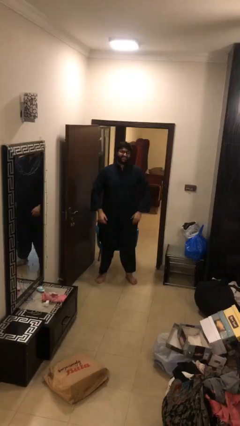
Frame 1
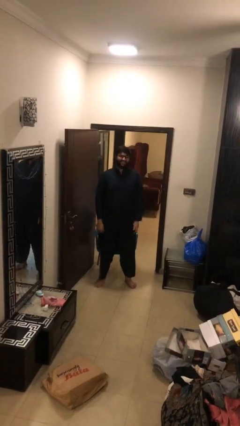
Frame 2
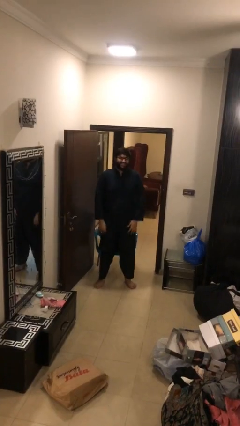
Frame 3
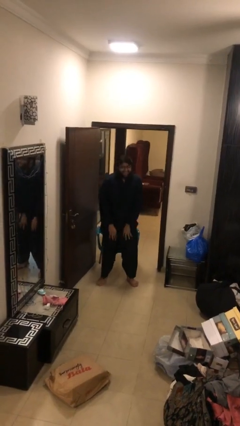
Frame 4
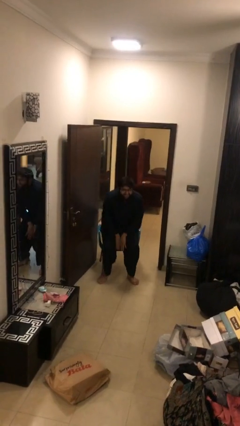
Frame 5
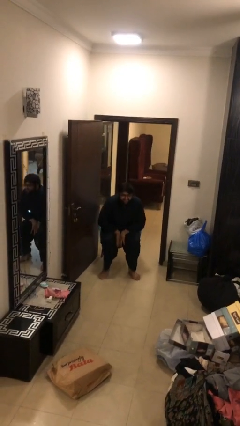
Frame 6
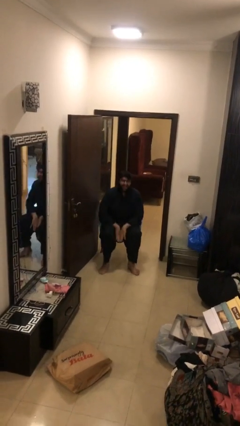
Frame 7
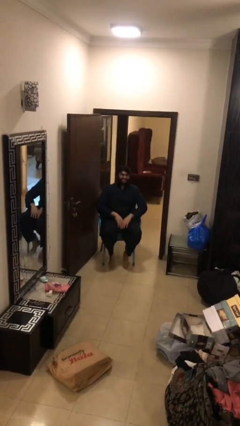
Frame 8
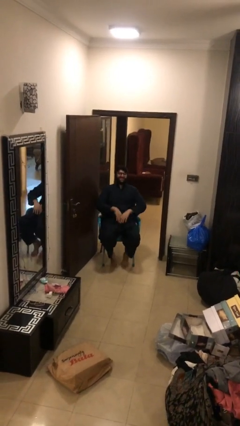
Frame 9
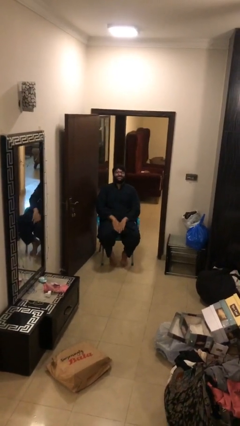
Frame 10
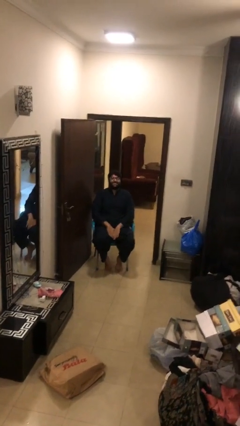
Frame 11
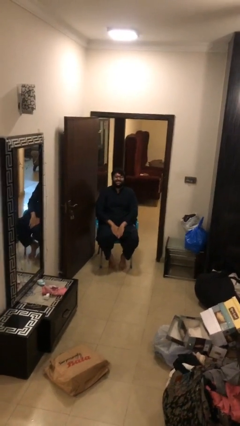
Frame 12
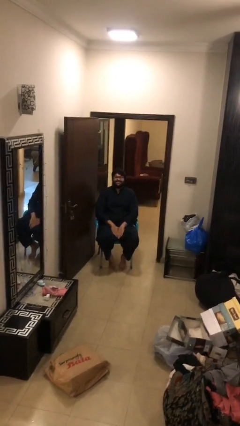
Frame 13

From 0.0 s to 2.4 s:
person sits down

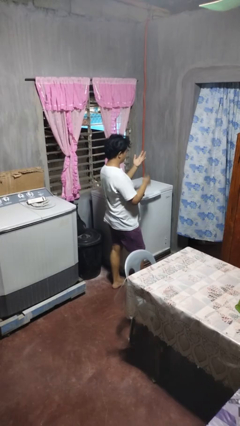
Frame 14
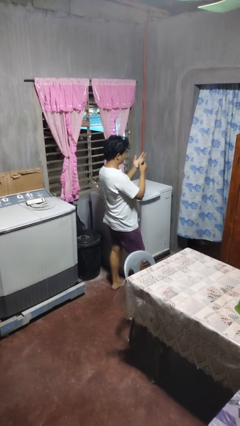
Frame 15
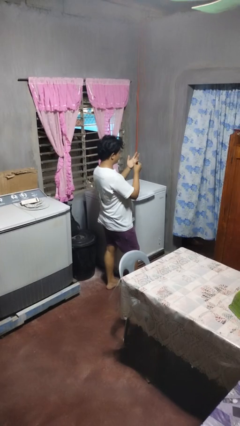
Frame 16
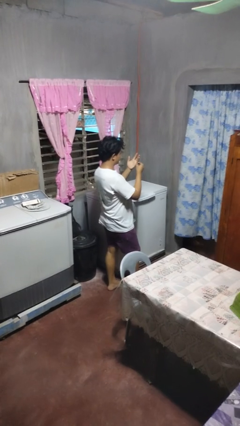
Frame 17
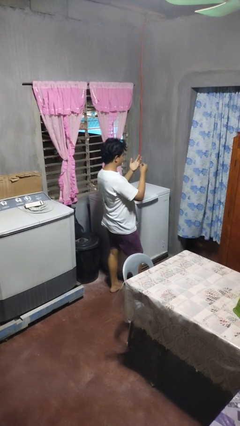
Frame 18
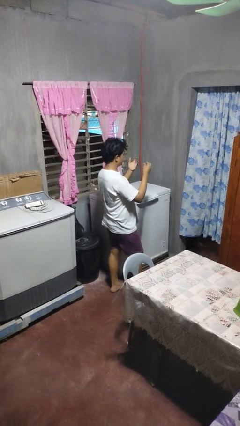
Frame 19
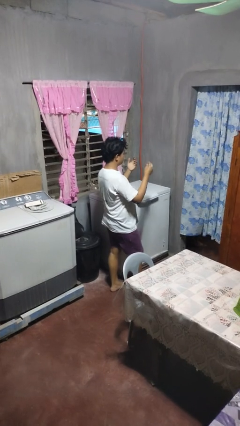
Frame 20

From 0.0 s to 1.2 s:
person takes off ring

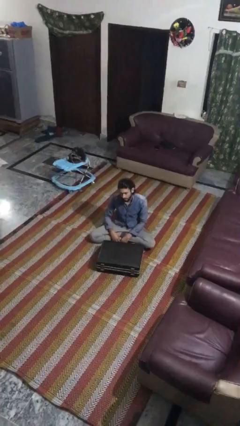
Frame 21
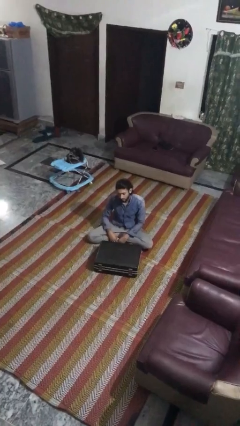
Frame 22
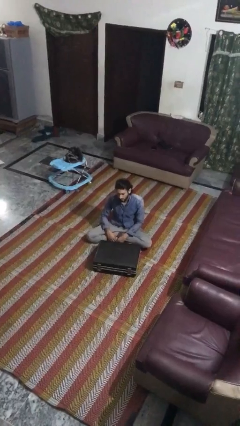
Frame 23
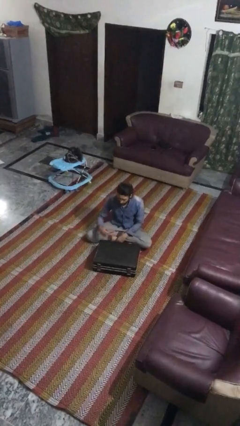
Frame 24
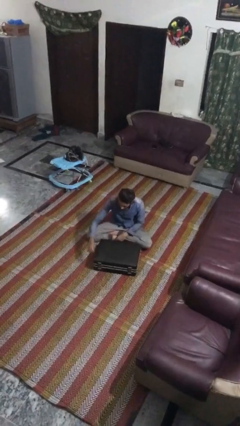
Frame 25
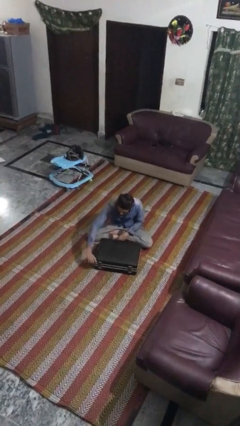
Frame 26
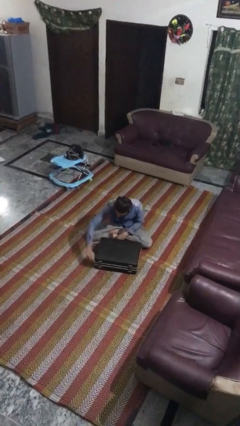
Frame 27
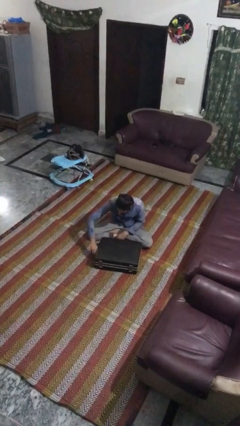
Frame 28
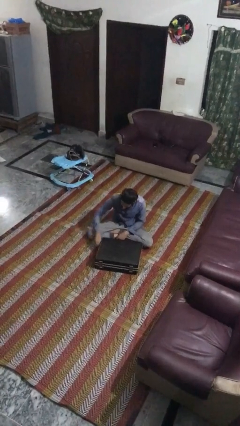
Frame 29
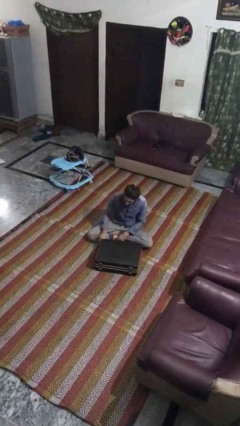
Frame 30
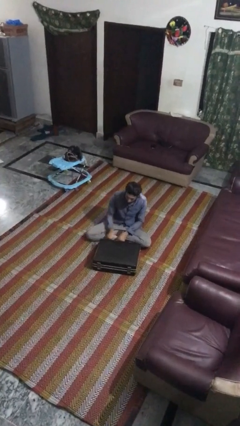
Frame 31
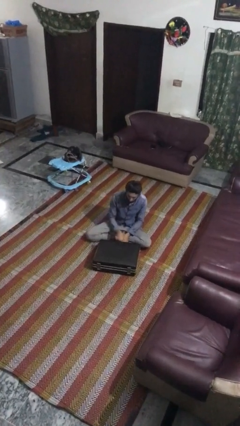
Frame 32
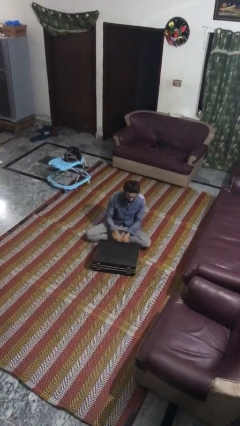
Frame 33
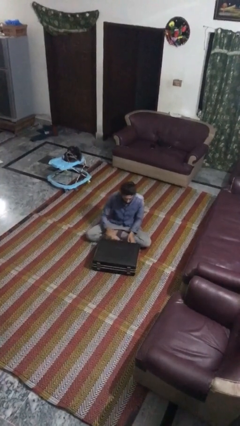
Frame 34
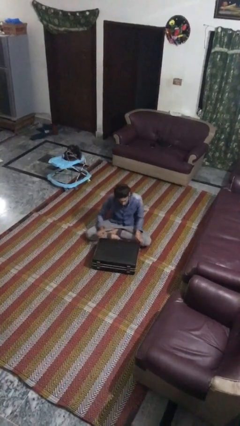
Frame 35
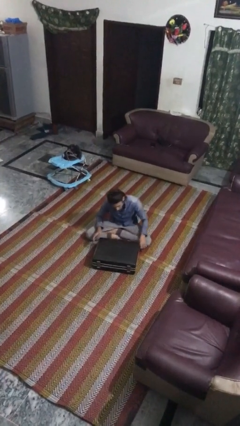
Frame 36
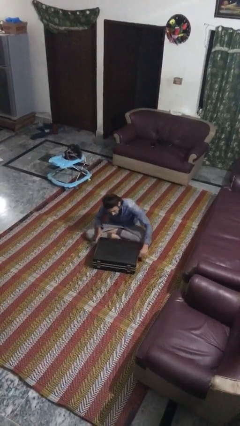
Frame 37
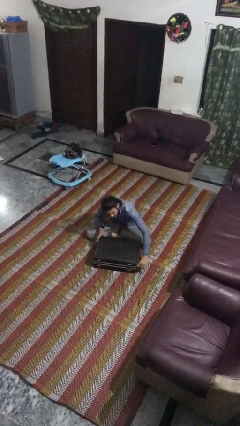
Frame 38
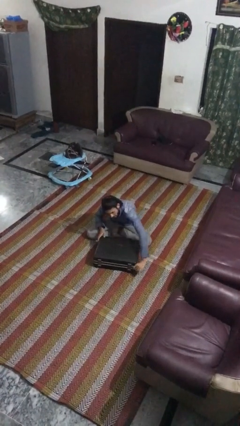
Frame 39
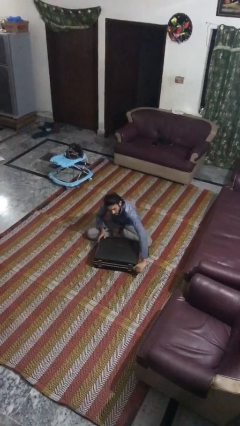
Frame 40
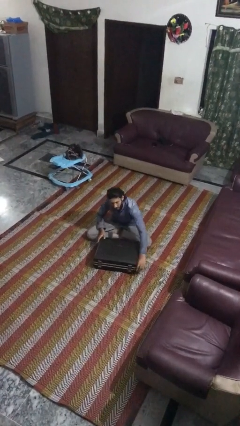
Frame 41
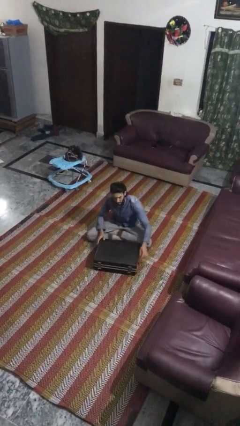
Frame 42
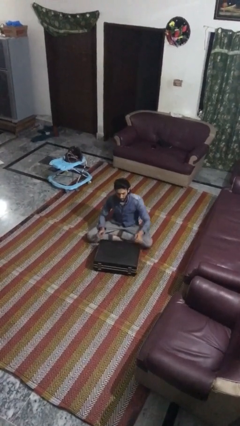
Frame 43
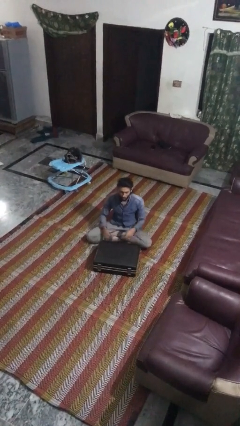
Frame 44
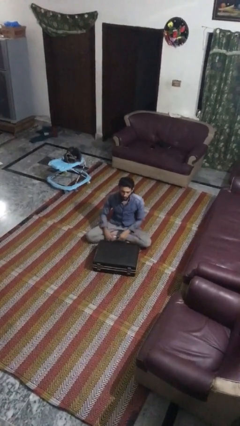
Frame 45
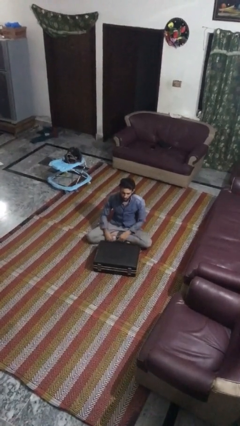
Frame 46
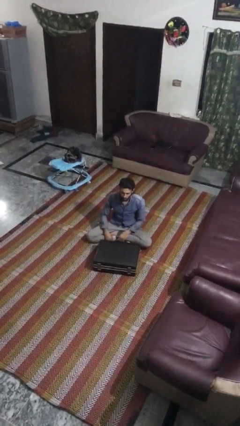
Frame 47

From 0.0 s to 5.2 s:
person opens suitcase

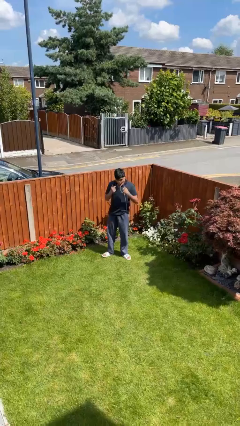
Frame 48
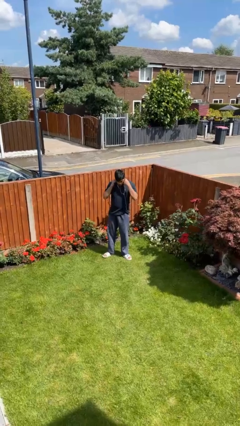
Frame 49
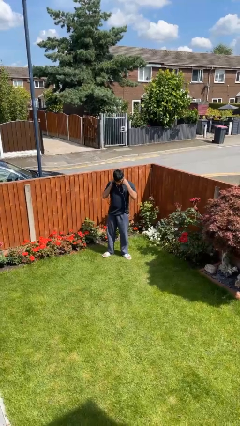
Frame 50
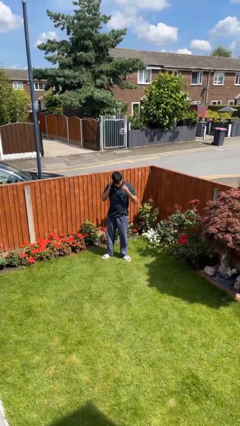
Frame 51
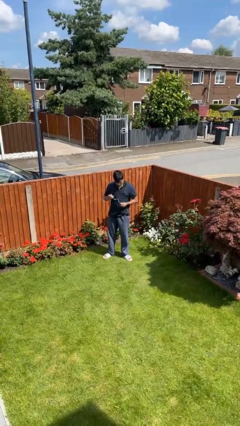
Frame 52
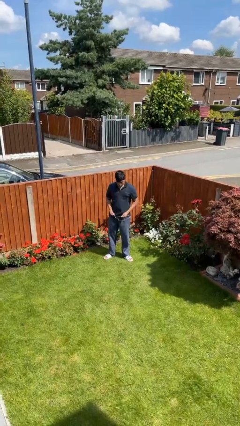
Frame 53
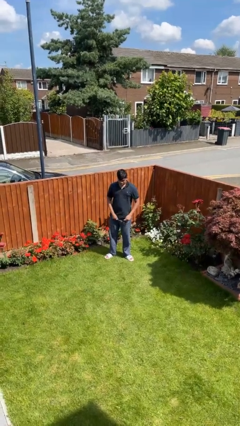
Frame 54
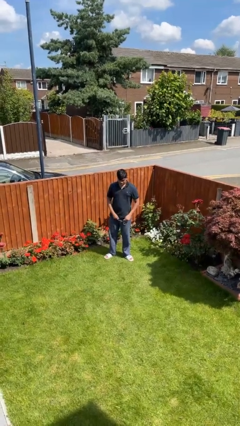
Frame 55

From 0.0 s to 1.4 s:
person takes off headphones

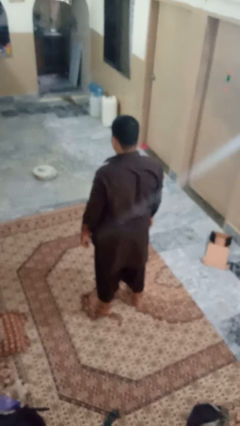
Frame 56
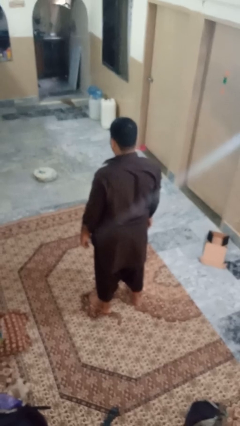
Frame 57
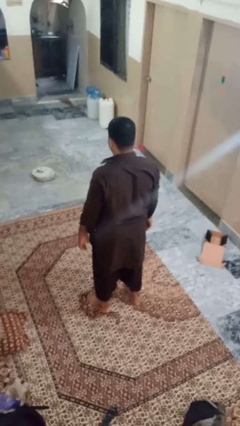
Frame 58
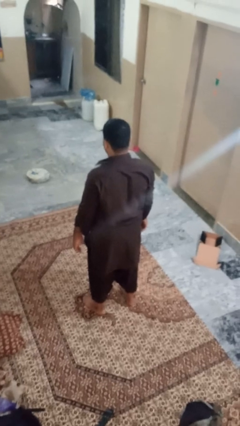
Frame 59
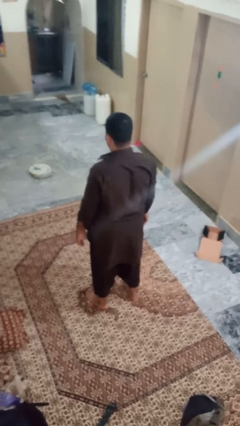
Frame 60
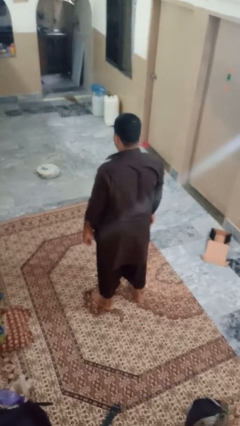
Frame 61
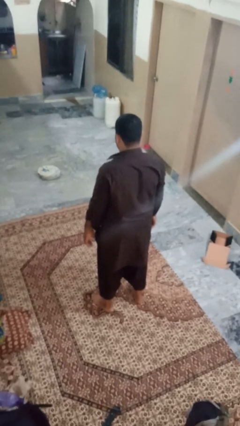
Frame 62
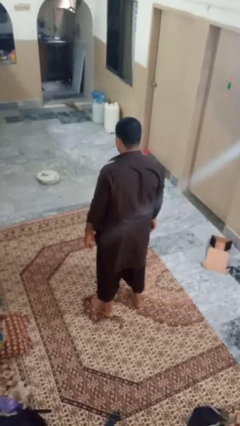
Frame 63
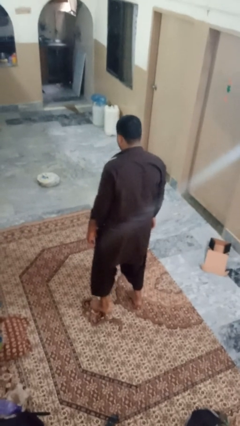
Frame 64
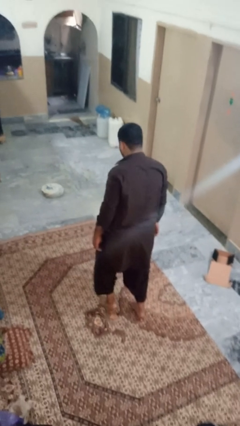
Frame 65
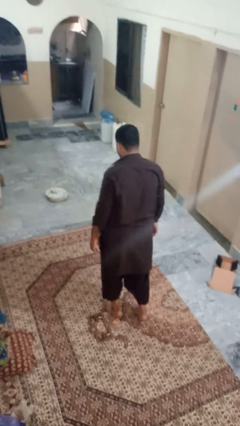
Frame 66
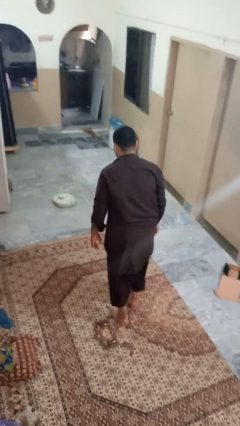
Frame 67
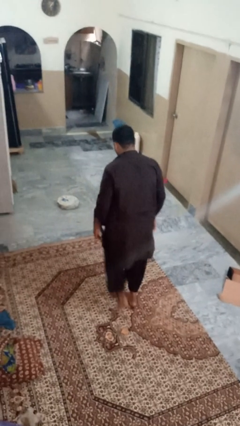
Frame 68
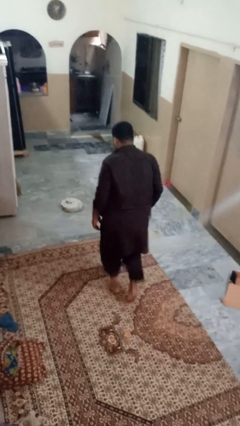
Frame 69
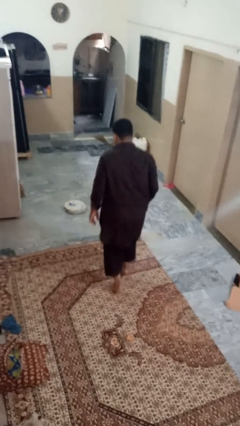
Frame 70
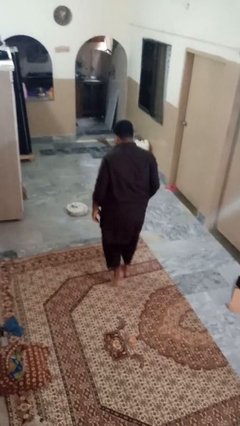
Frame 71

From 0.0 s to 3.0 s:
person walks tiptoe

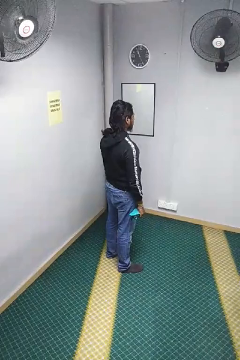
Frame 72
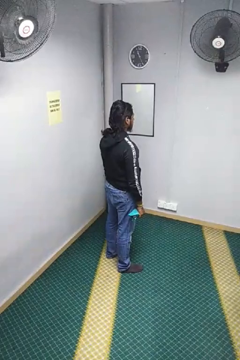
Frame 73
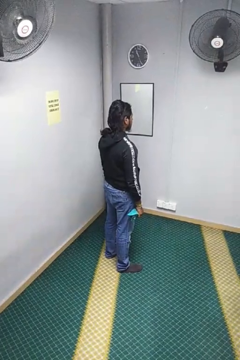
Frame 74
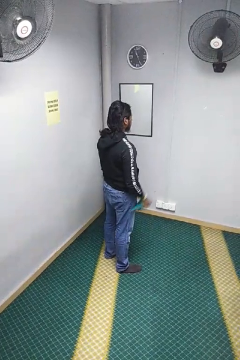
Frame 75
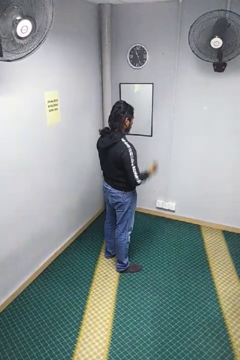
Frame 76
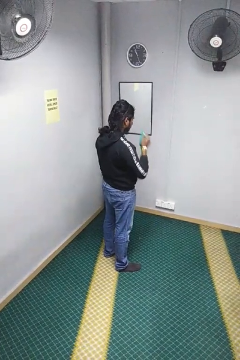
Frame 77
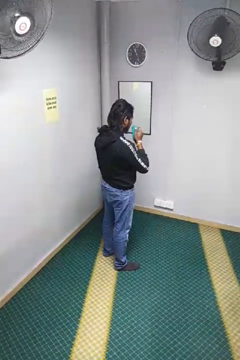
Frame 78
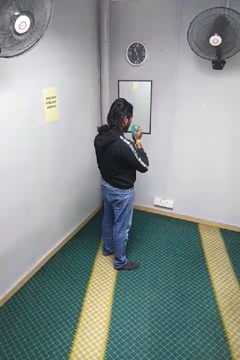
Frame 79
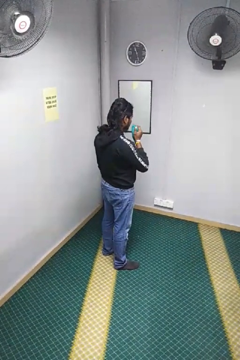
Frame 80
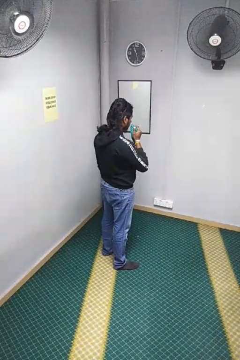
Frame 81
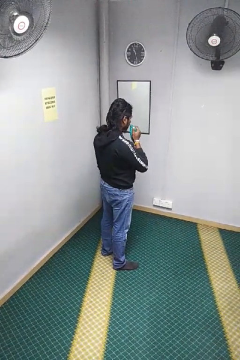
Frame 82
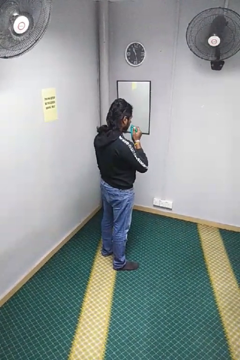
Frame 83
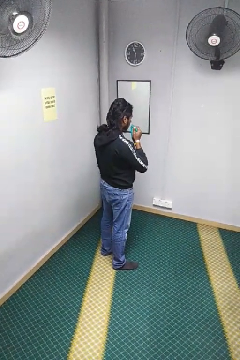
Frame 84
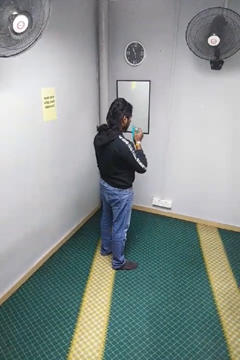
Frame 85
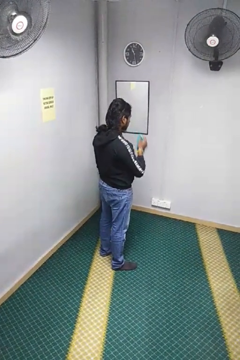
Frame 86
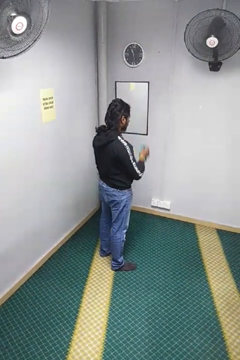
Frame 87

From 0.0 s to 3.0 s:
person wipes mouth with napkin

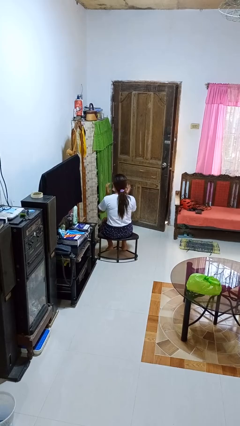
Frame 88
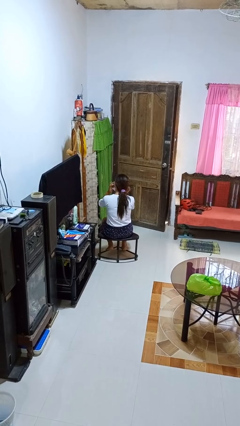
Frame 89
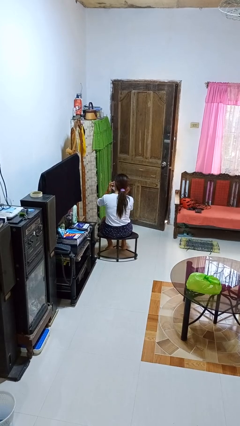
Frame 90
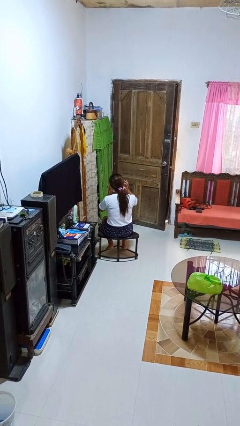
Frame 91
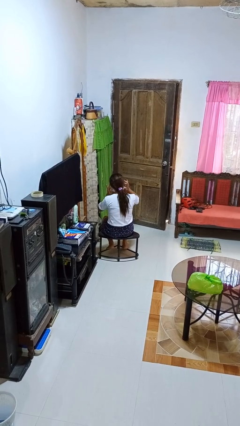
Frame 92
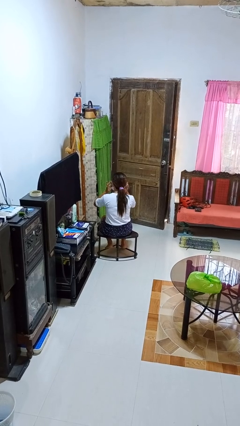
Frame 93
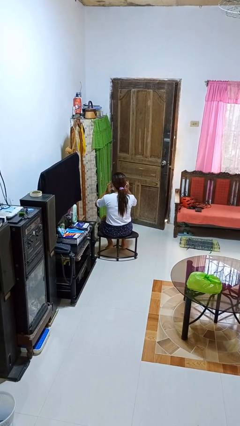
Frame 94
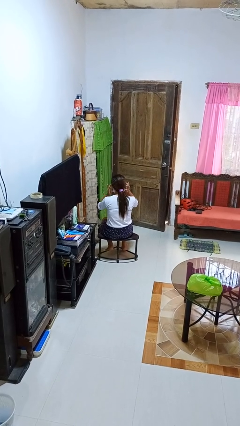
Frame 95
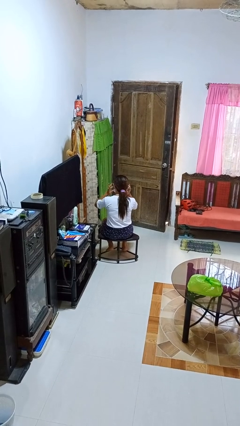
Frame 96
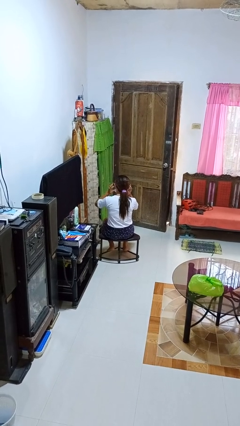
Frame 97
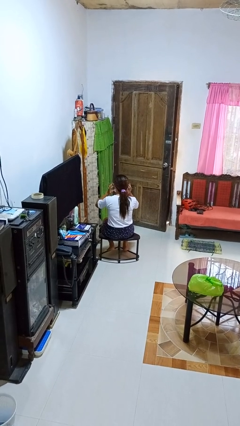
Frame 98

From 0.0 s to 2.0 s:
person puts fingers in ear
